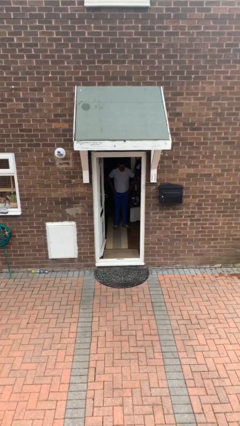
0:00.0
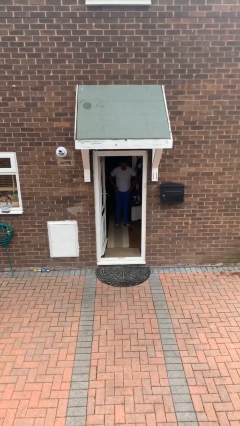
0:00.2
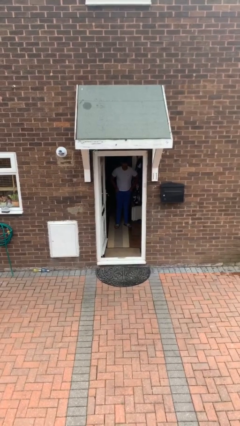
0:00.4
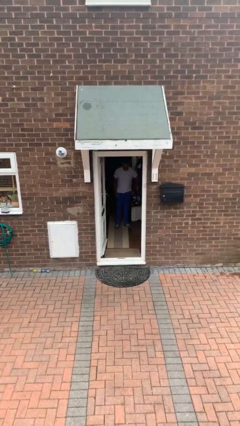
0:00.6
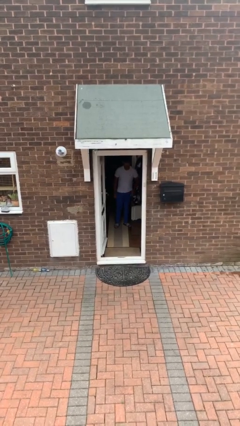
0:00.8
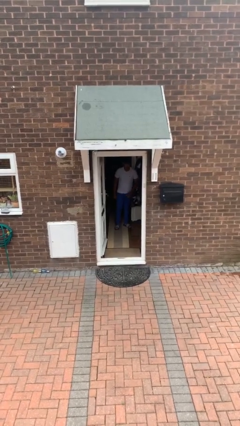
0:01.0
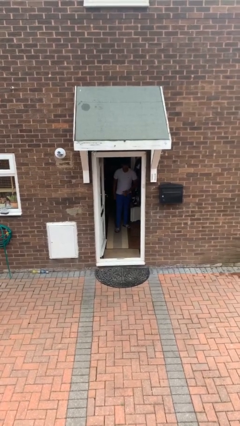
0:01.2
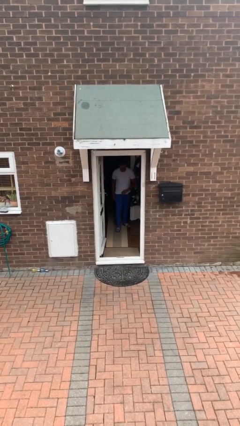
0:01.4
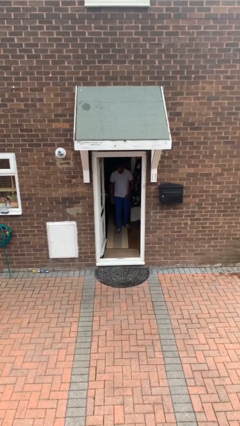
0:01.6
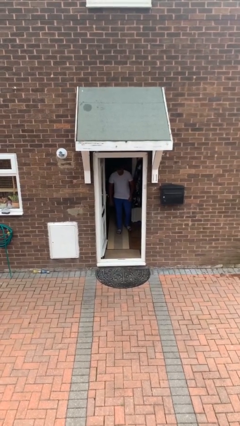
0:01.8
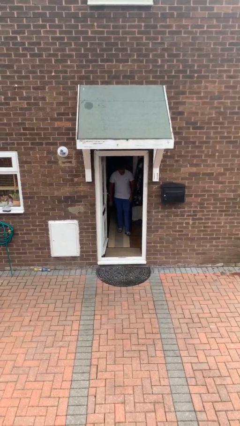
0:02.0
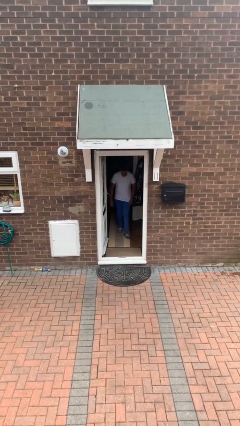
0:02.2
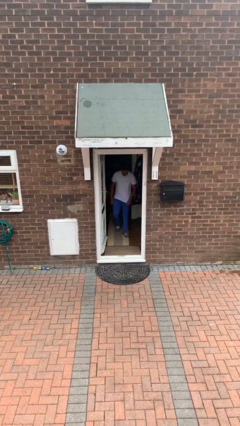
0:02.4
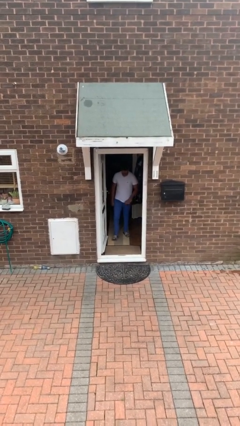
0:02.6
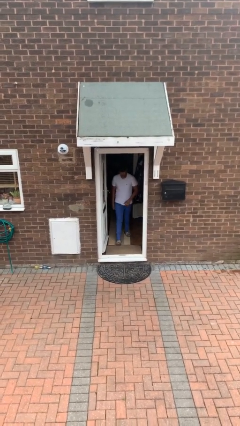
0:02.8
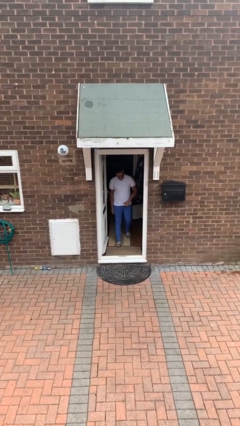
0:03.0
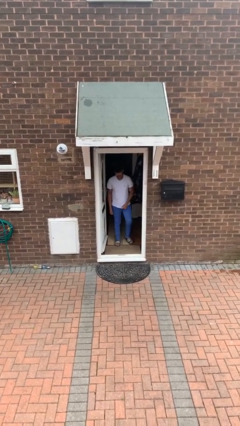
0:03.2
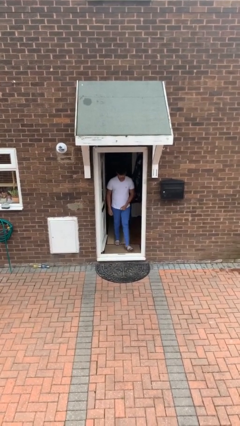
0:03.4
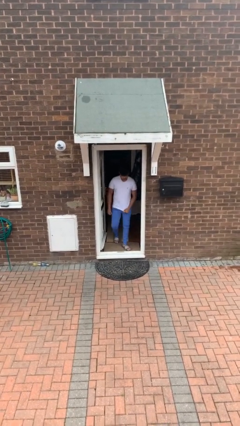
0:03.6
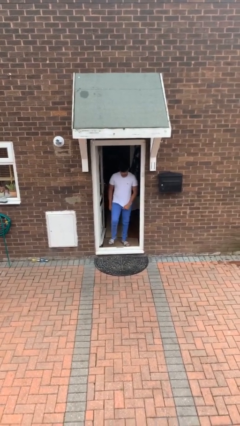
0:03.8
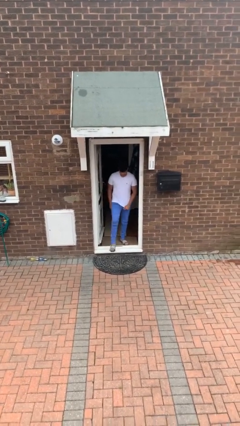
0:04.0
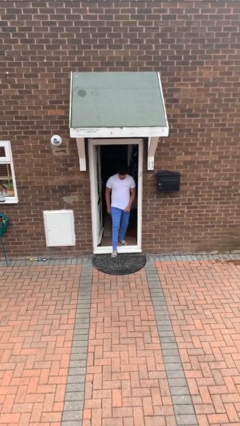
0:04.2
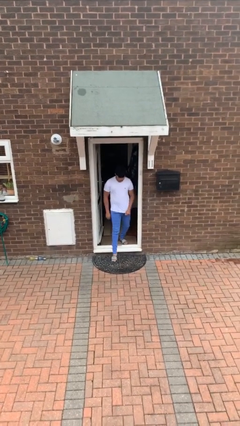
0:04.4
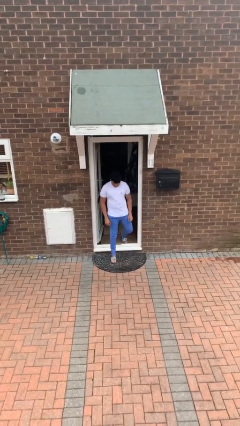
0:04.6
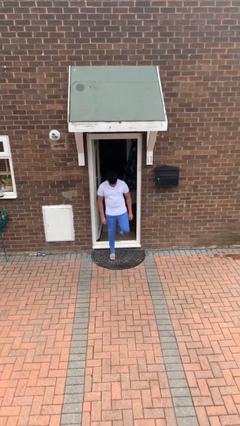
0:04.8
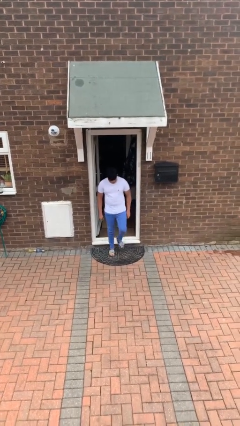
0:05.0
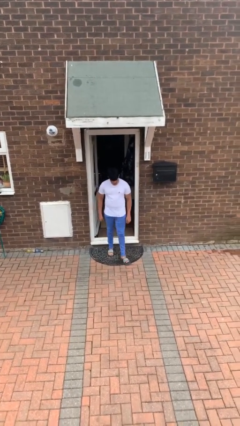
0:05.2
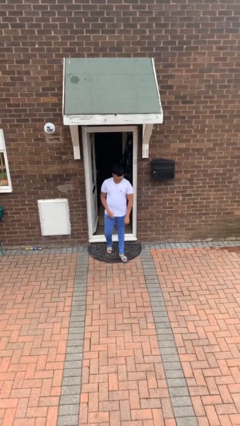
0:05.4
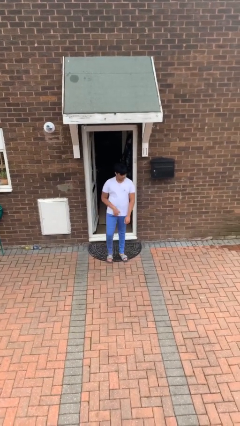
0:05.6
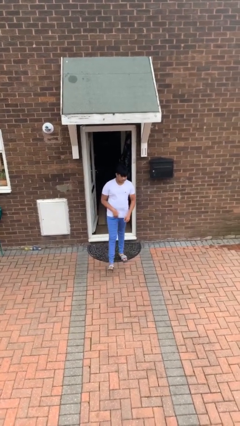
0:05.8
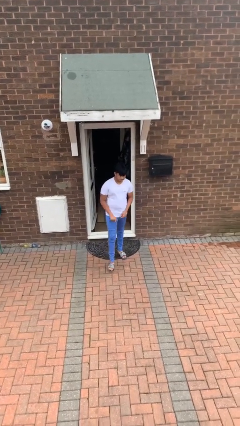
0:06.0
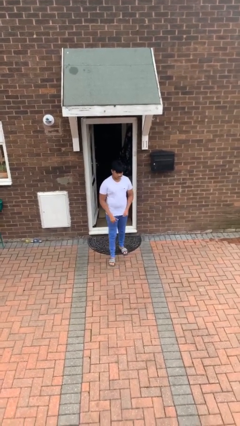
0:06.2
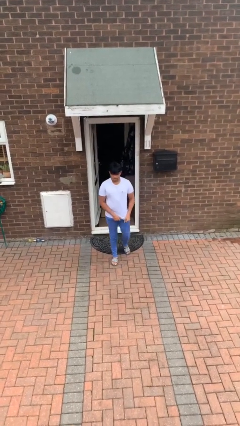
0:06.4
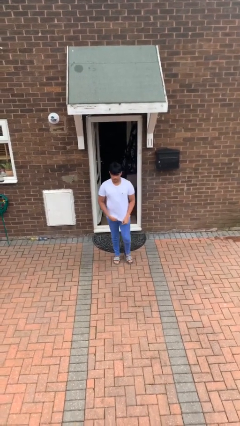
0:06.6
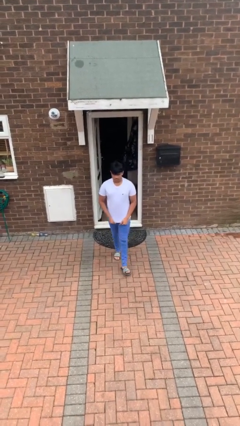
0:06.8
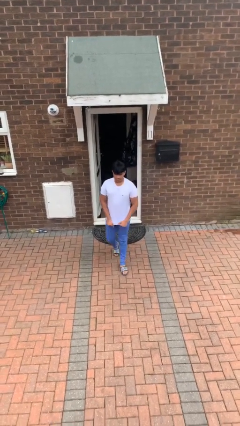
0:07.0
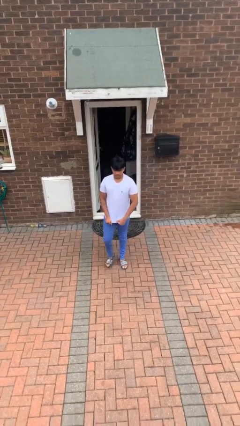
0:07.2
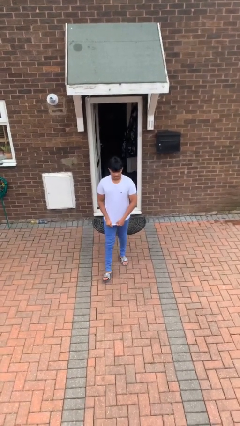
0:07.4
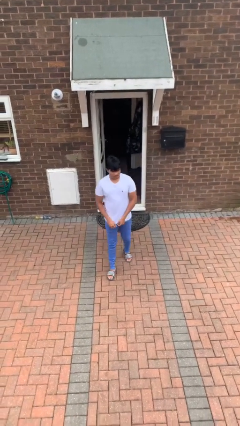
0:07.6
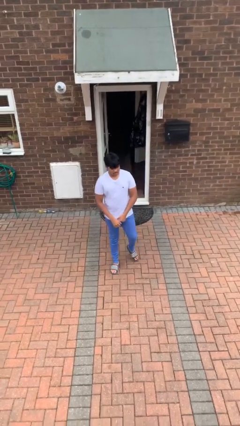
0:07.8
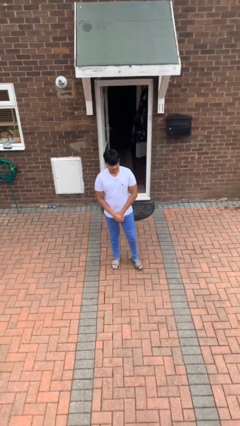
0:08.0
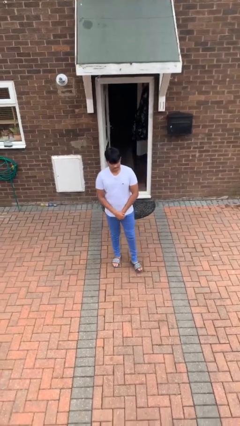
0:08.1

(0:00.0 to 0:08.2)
person enters scene through structure

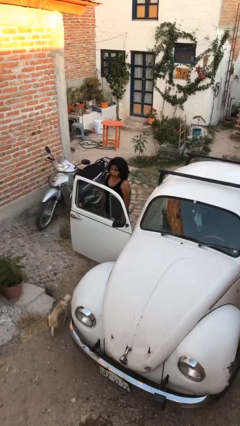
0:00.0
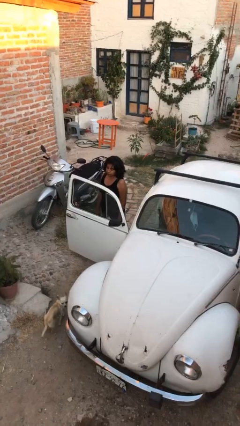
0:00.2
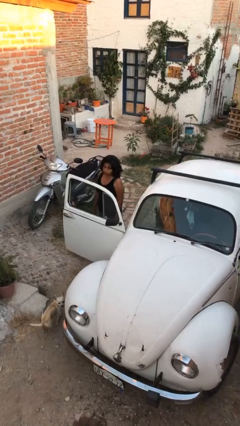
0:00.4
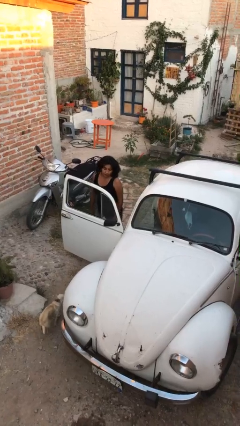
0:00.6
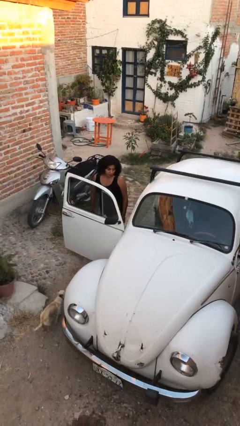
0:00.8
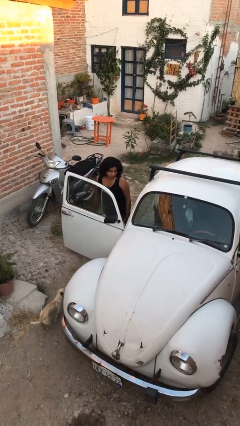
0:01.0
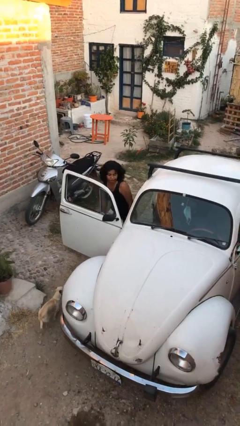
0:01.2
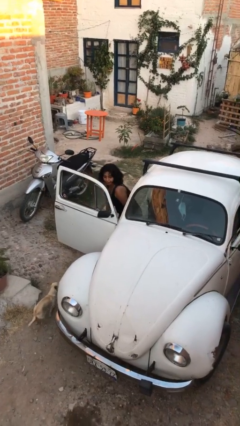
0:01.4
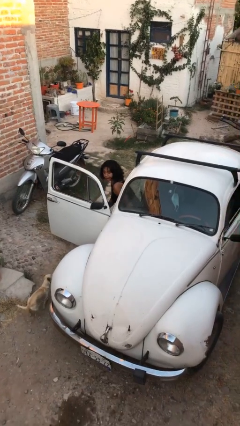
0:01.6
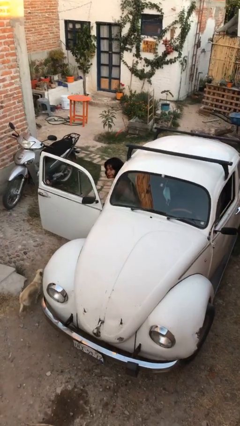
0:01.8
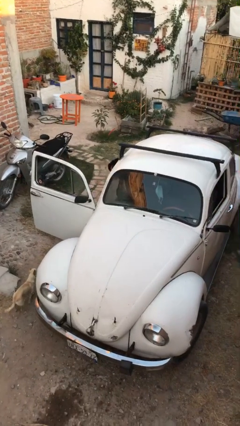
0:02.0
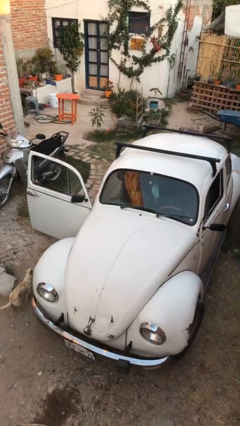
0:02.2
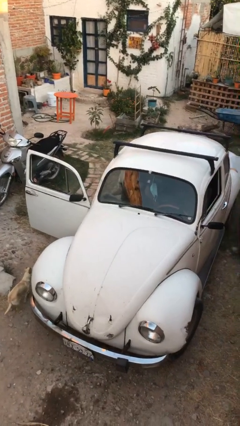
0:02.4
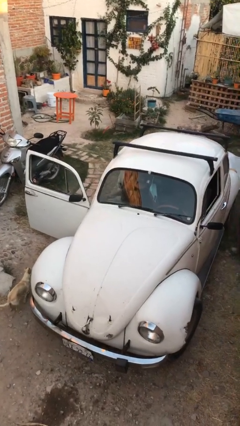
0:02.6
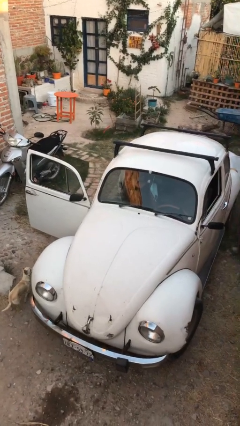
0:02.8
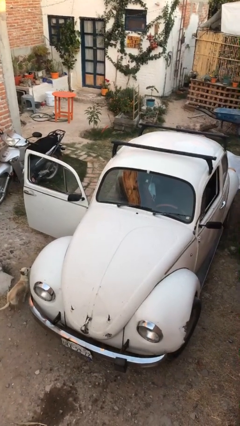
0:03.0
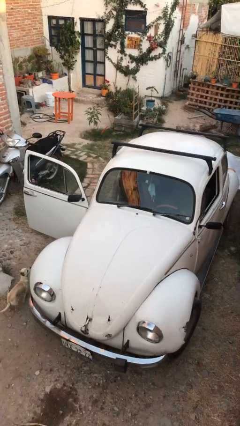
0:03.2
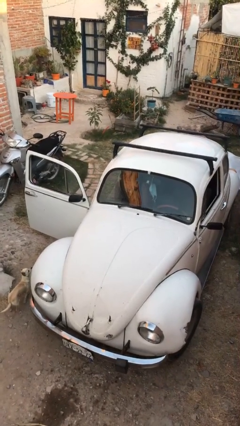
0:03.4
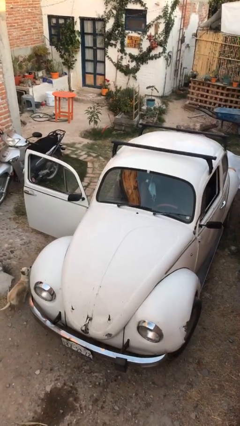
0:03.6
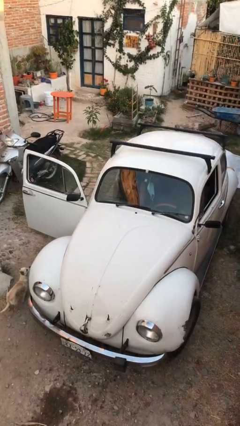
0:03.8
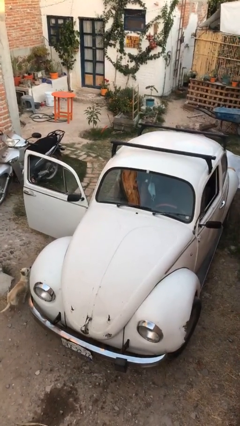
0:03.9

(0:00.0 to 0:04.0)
person enters car

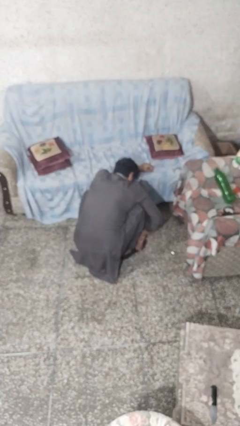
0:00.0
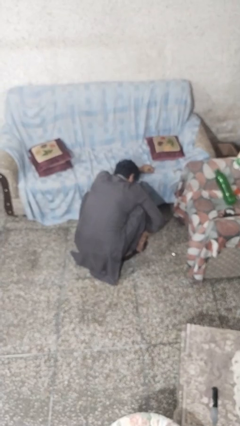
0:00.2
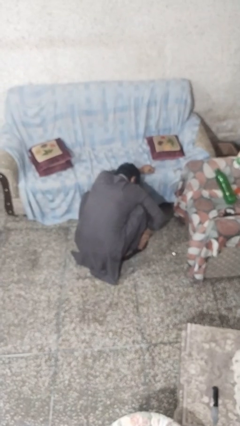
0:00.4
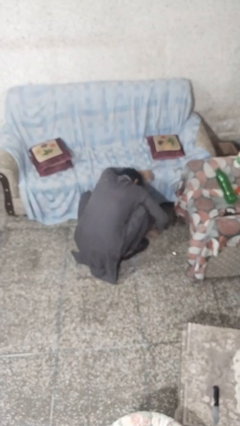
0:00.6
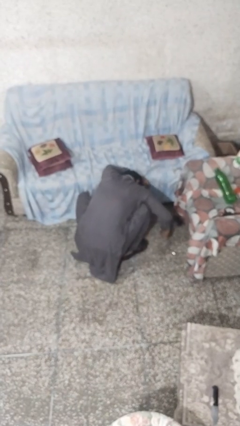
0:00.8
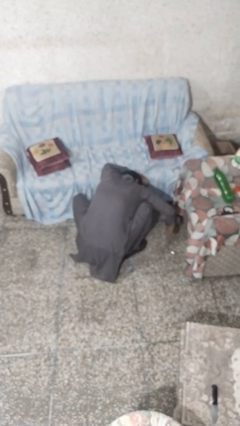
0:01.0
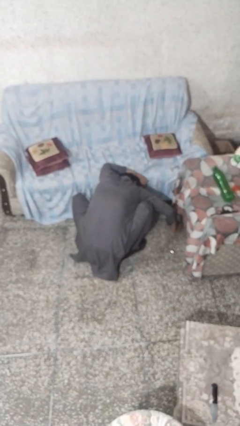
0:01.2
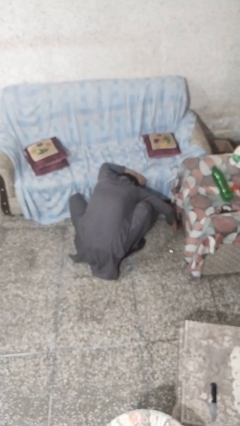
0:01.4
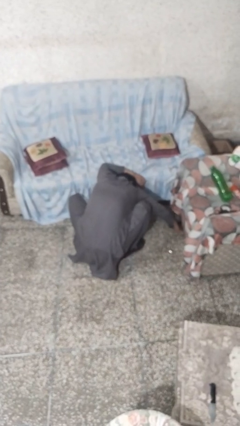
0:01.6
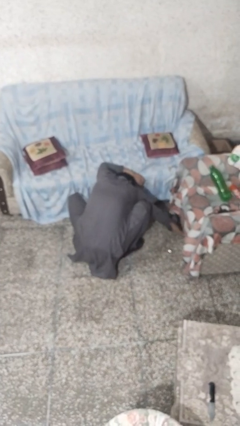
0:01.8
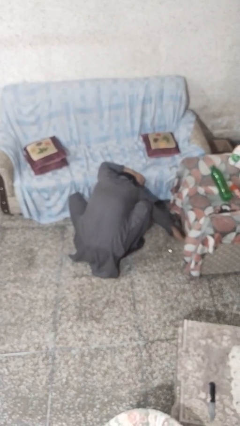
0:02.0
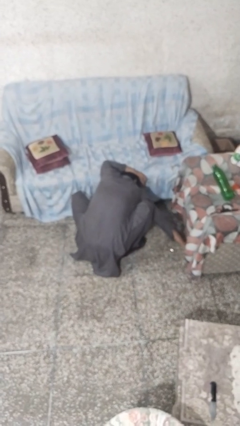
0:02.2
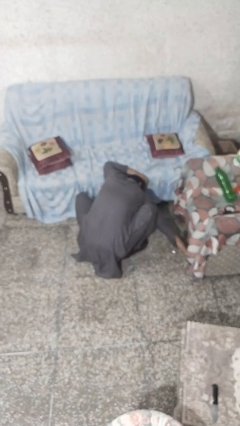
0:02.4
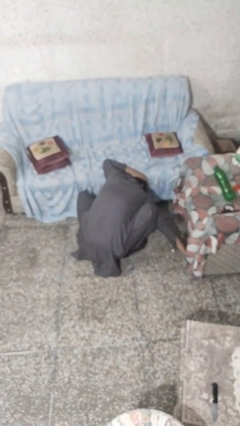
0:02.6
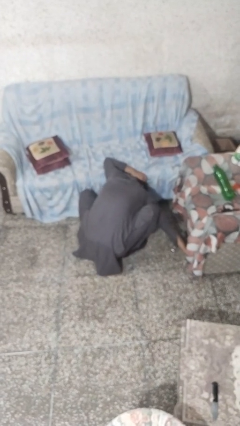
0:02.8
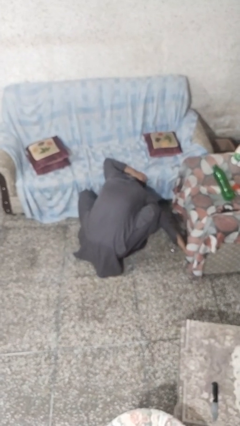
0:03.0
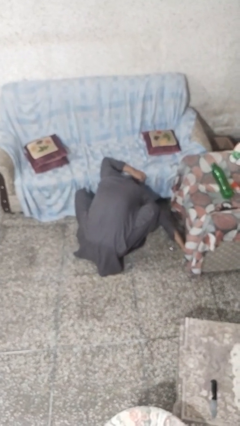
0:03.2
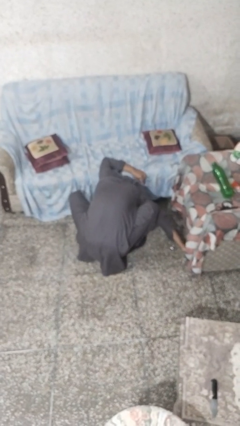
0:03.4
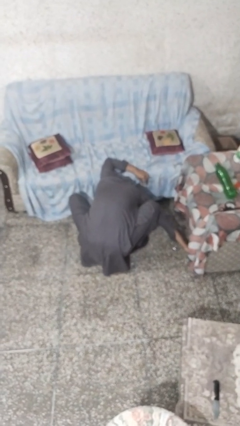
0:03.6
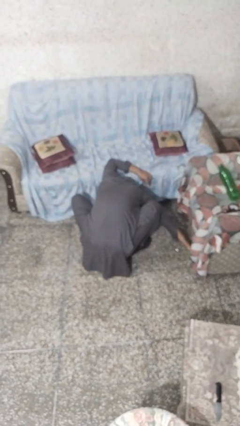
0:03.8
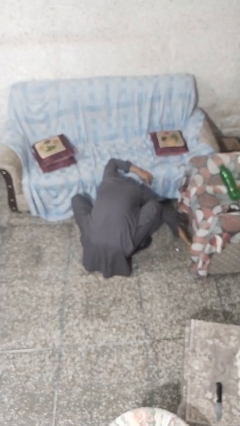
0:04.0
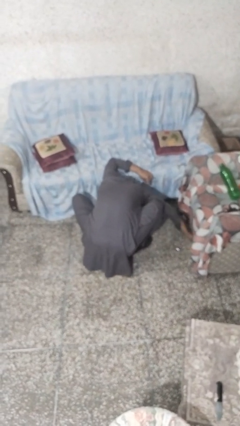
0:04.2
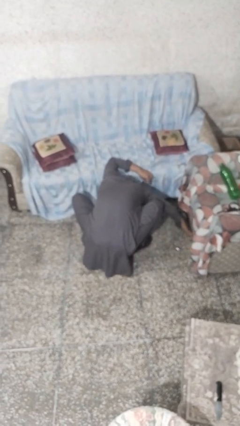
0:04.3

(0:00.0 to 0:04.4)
person searches under couch

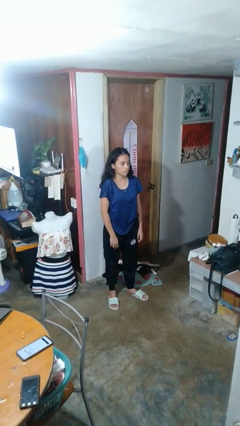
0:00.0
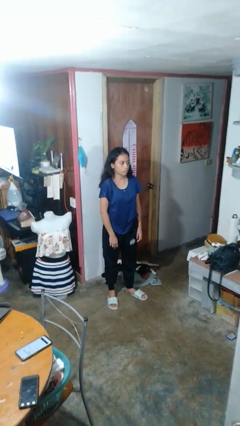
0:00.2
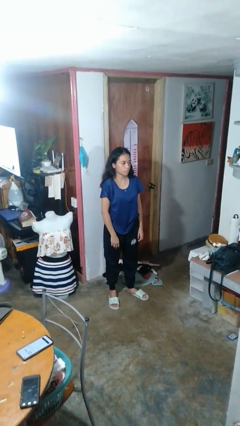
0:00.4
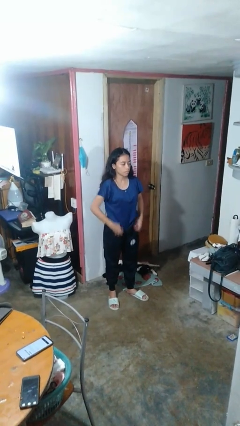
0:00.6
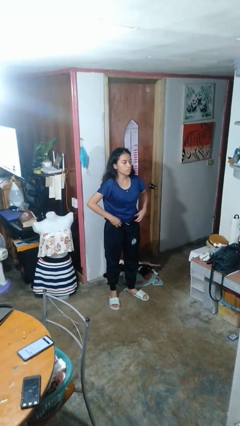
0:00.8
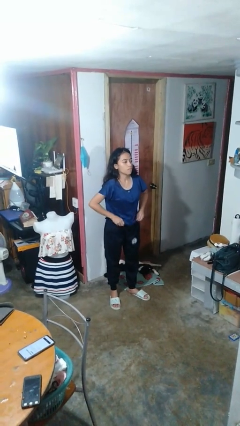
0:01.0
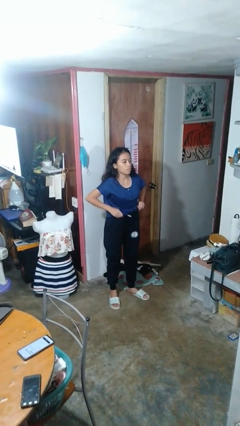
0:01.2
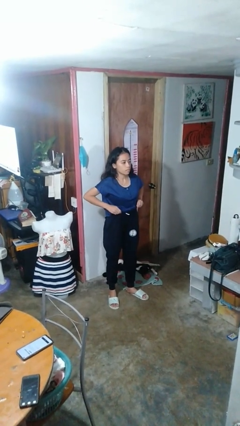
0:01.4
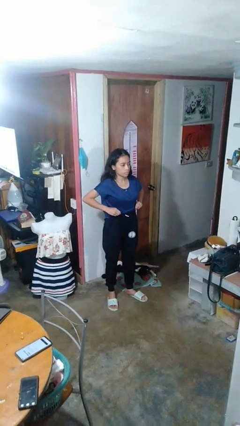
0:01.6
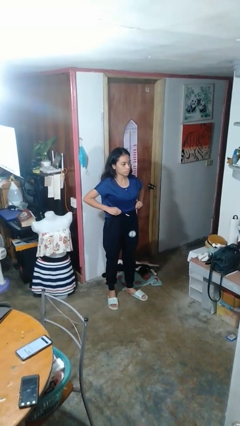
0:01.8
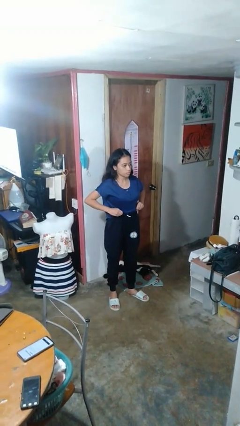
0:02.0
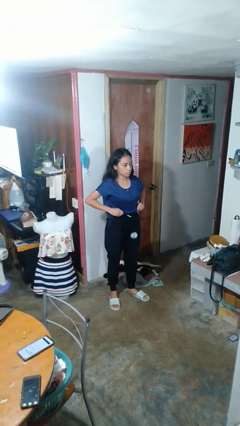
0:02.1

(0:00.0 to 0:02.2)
person hikes up pants
